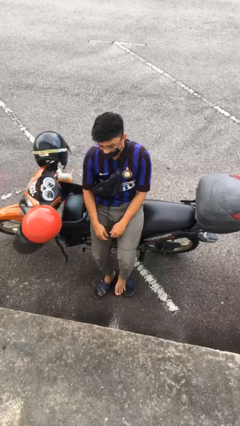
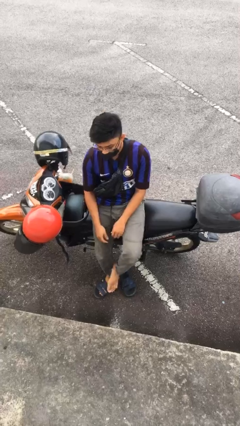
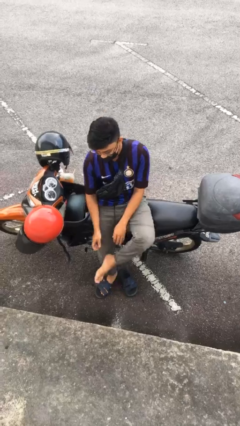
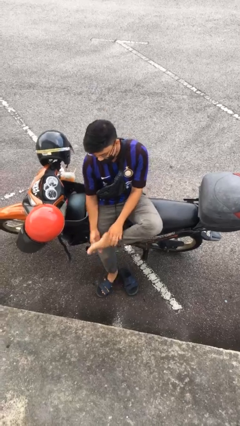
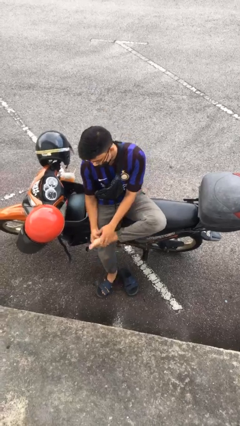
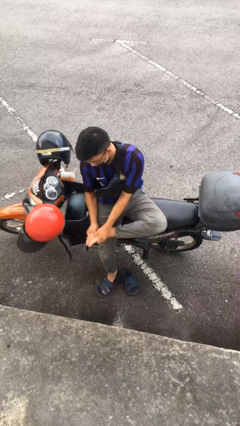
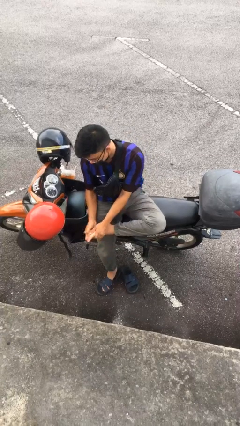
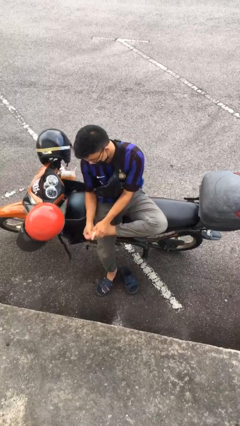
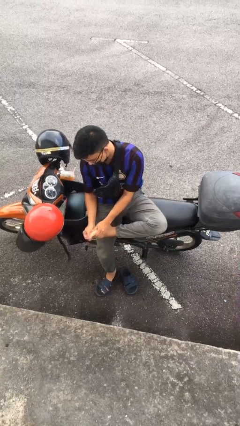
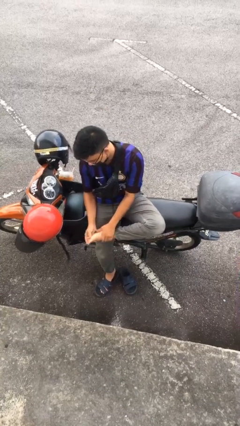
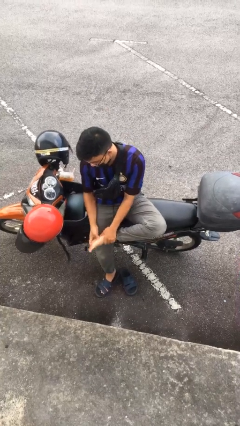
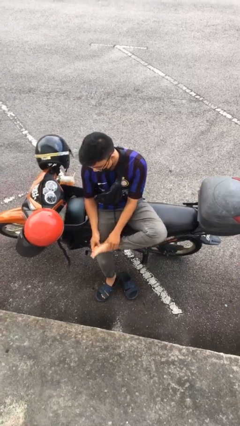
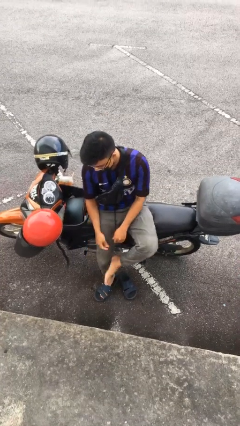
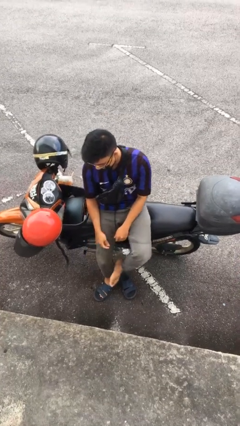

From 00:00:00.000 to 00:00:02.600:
person rubs foot

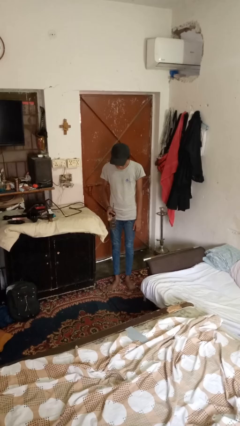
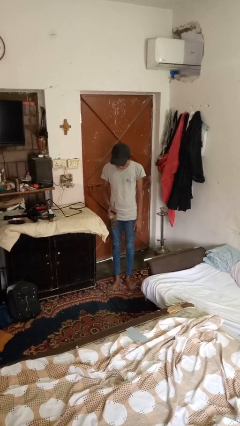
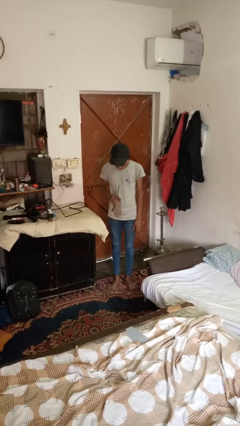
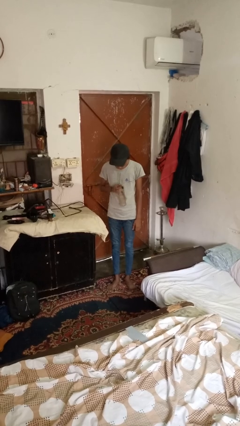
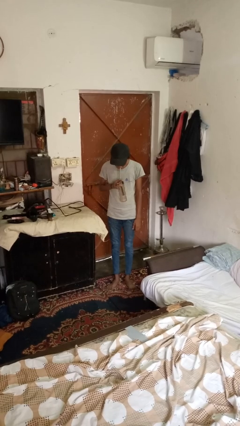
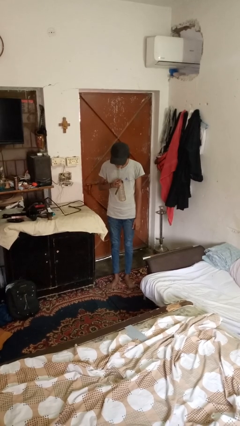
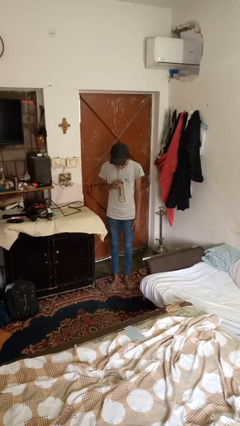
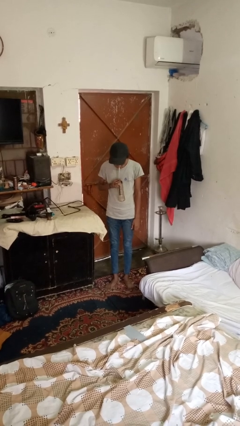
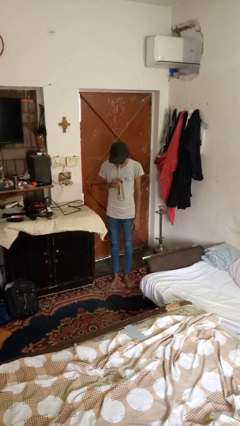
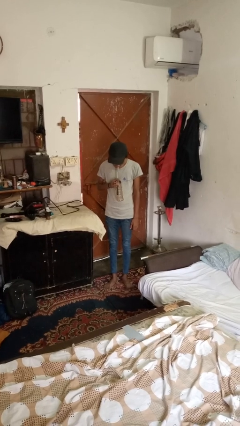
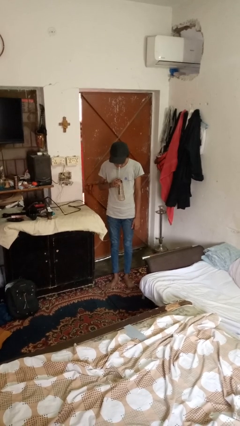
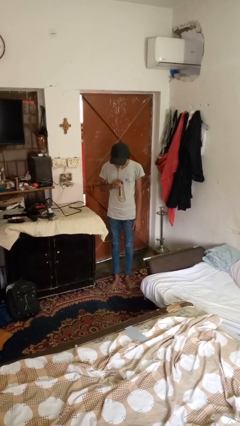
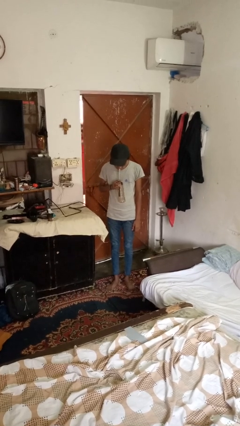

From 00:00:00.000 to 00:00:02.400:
person drinks from straw

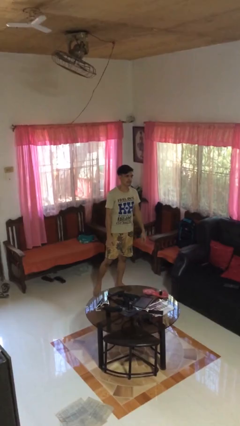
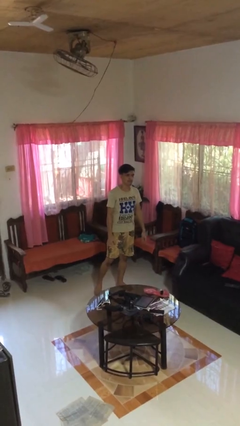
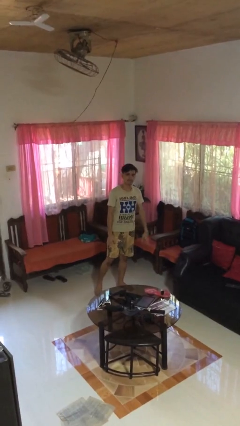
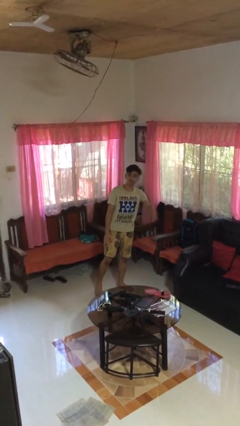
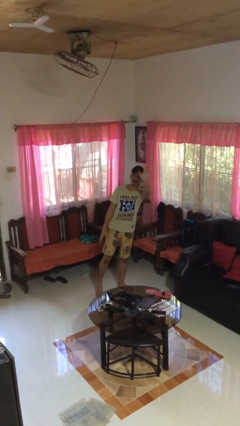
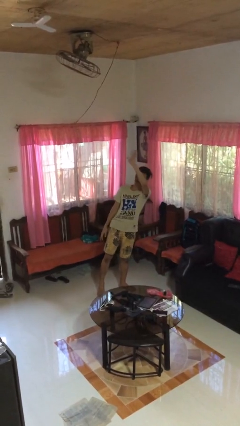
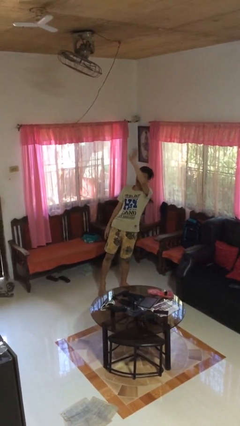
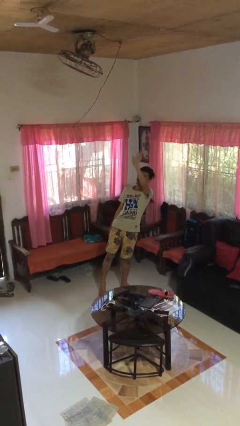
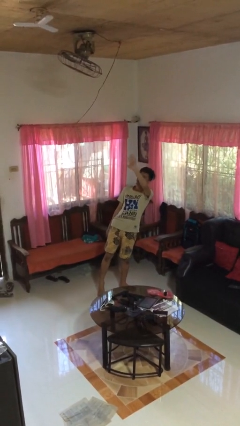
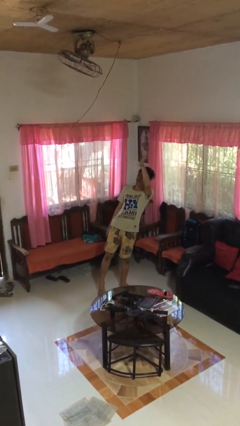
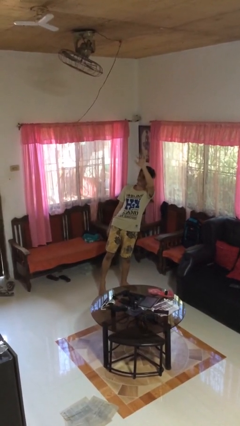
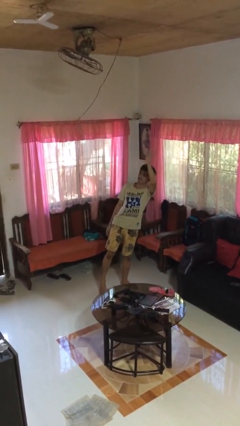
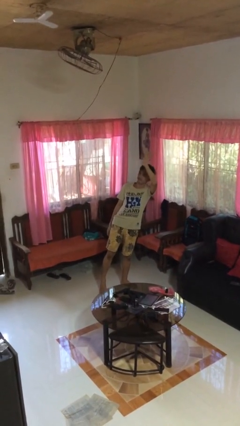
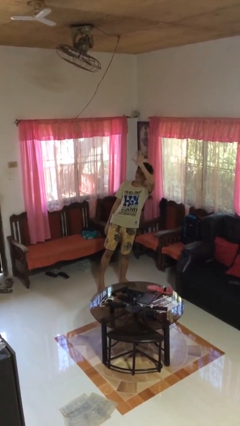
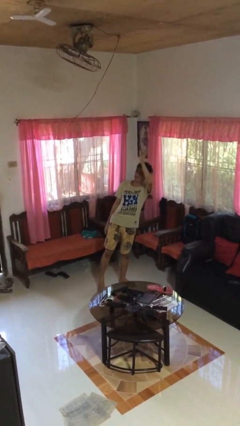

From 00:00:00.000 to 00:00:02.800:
person waves at person

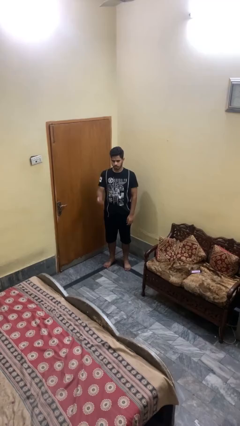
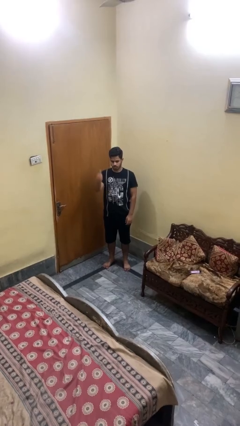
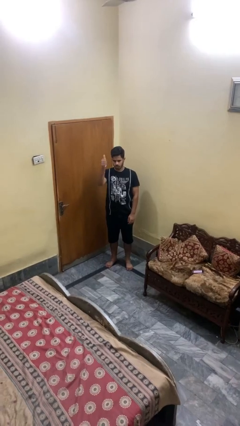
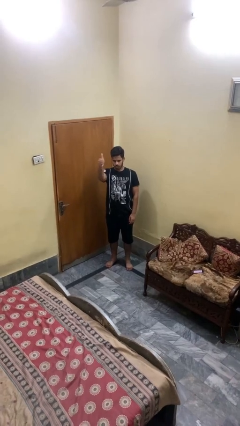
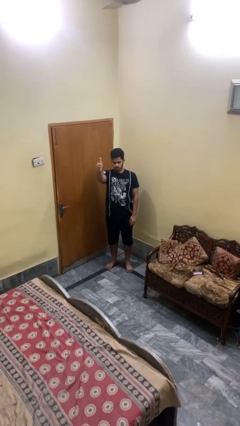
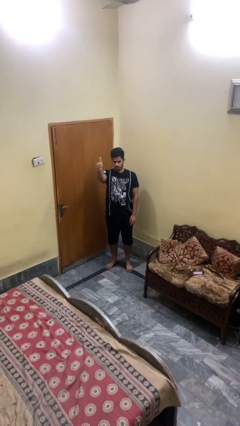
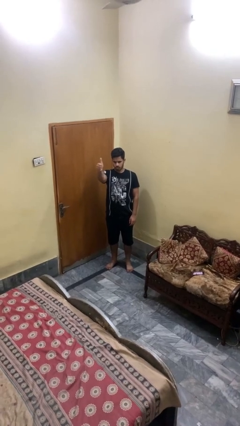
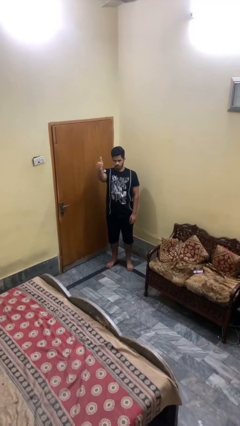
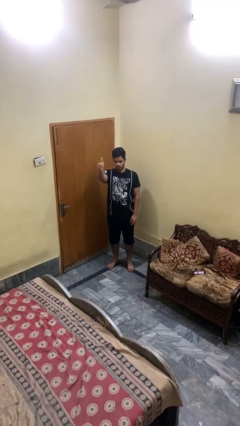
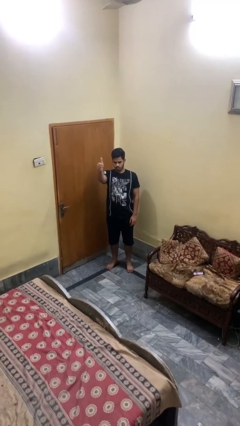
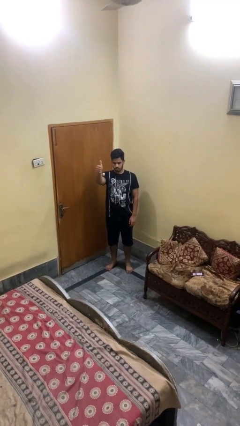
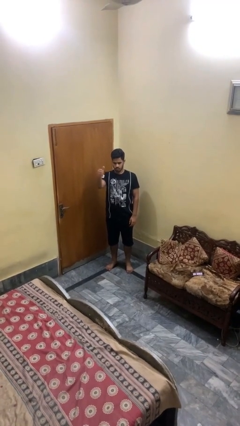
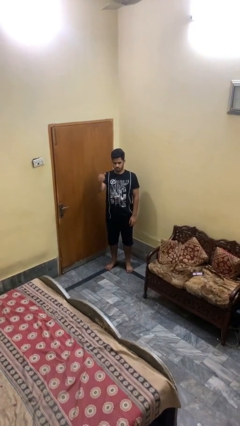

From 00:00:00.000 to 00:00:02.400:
person gestures thumbs up

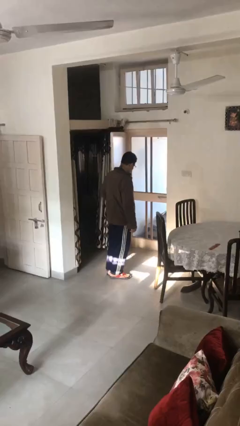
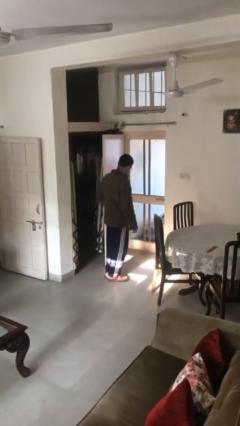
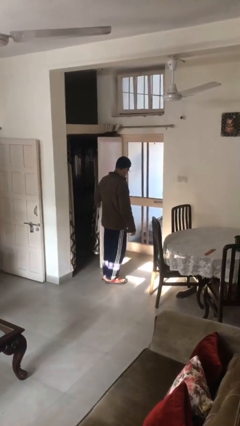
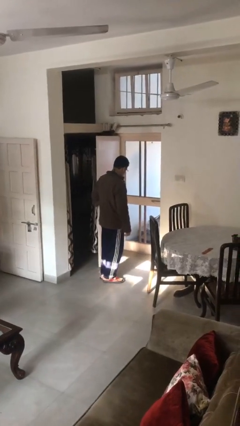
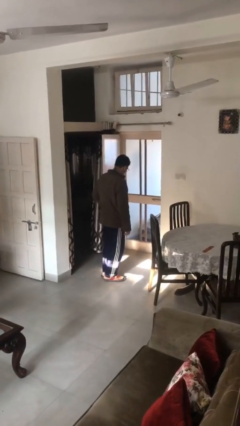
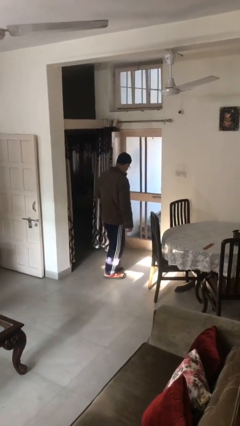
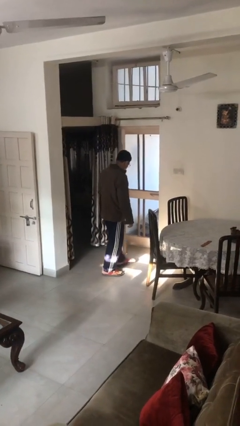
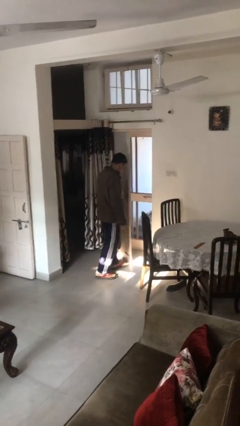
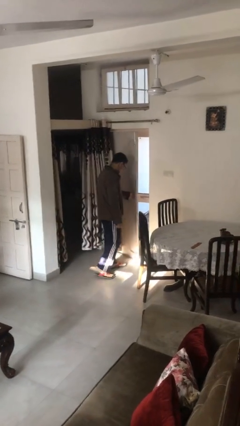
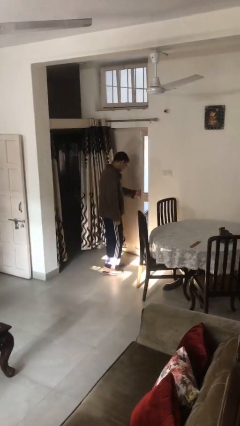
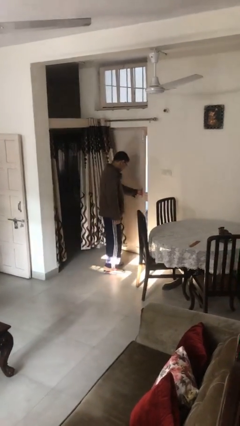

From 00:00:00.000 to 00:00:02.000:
person closes facility door

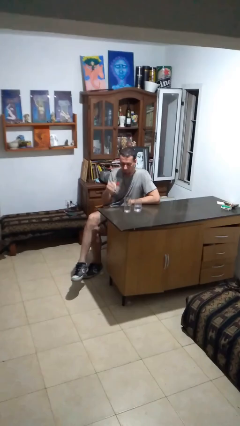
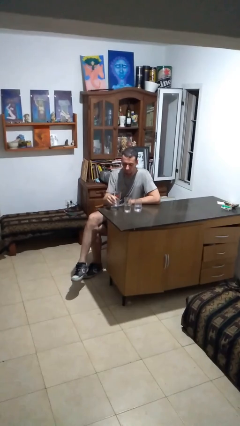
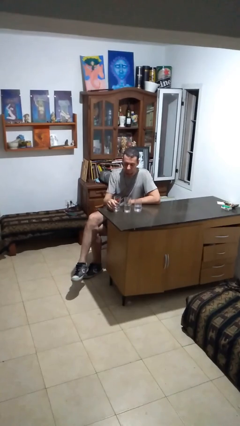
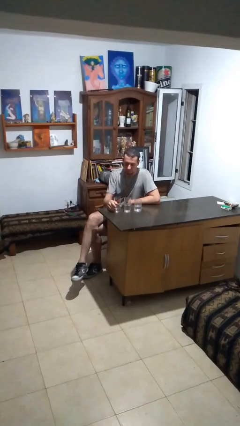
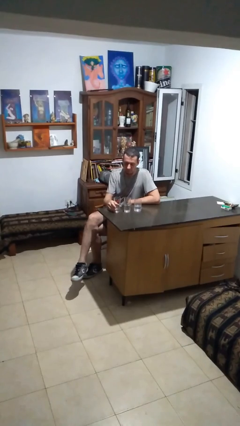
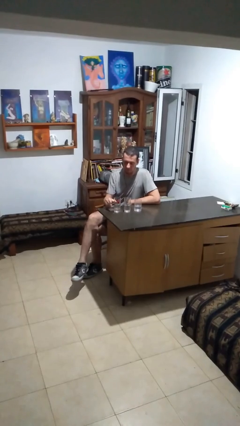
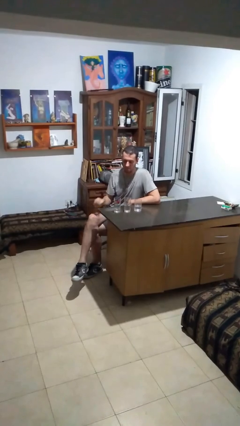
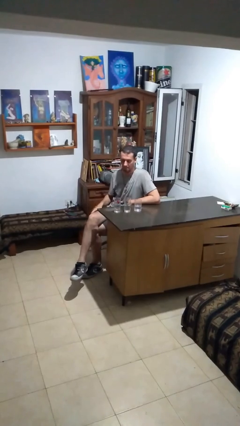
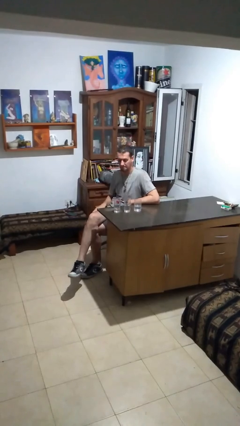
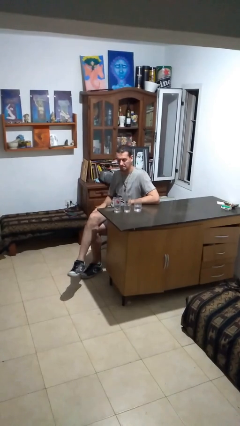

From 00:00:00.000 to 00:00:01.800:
person puts down object on table

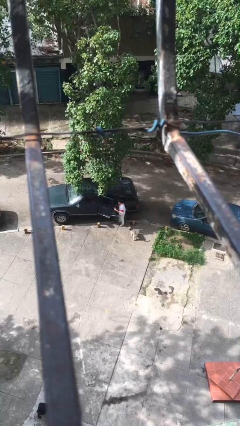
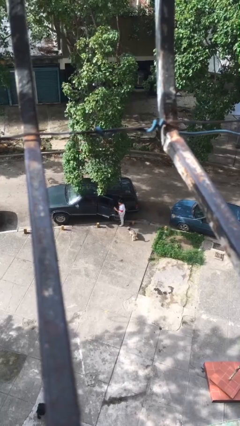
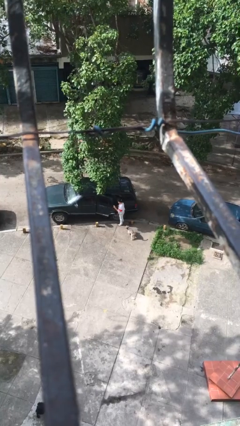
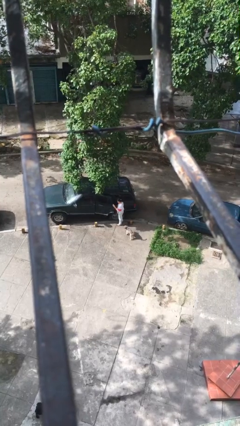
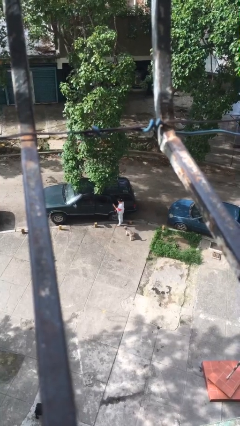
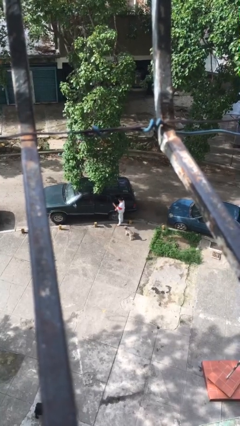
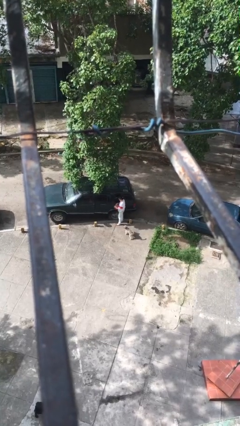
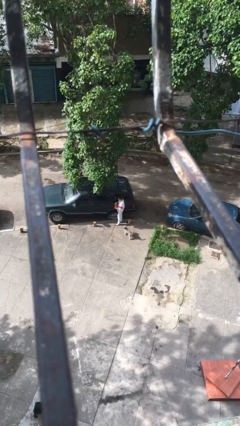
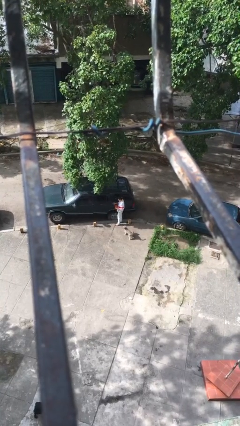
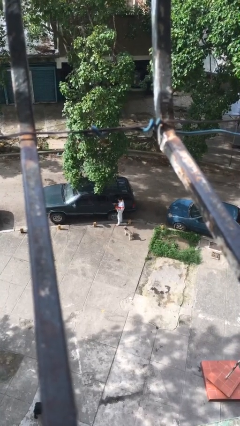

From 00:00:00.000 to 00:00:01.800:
person closes car door

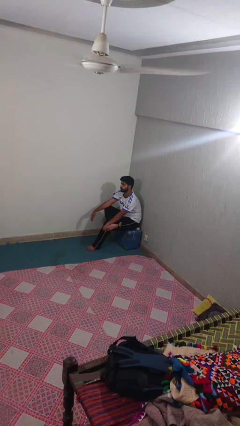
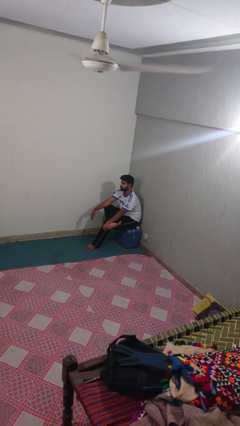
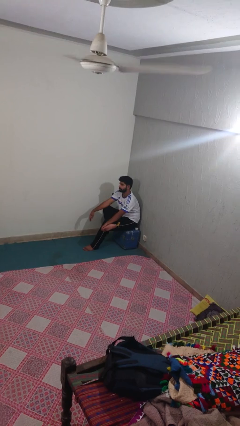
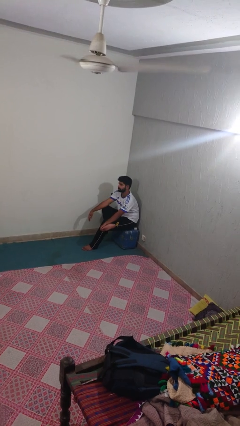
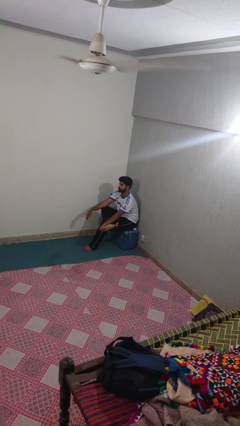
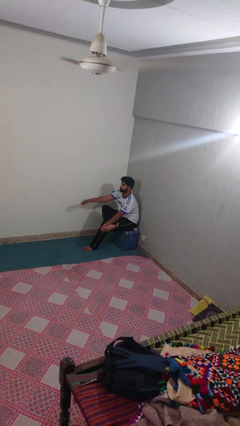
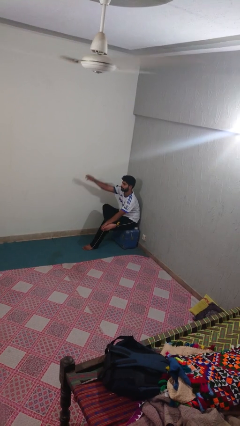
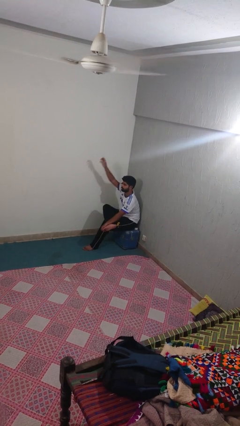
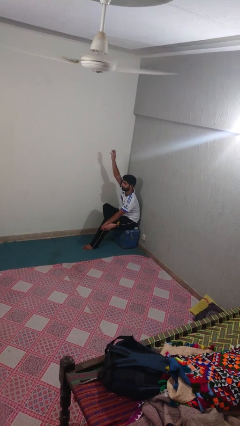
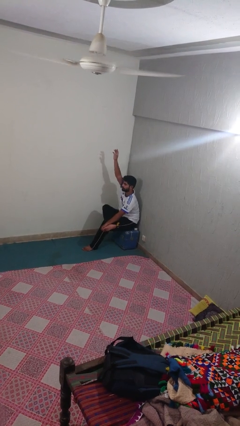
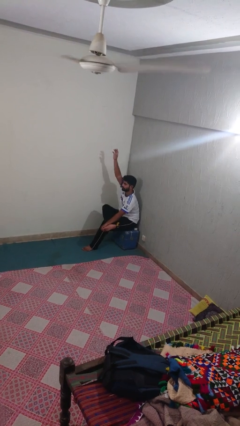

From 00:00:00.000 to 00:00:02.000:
person gestures raise hand
